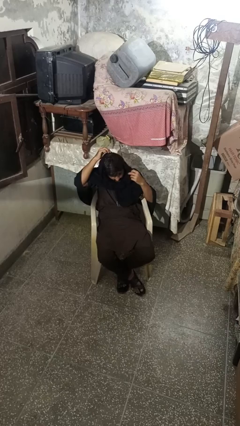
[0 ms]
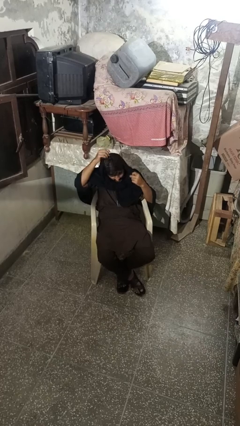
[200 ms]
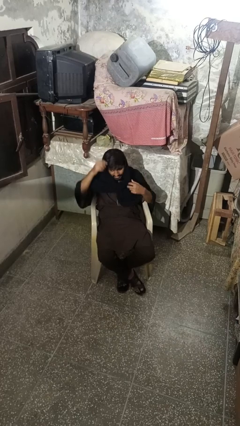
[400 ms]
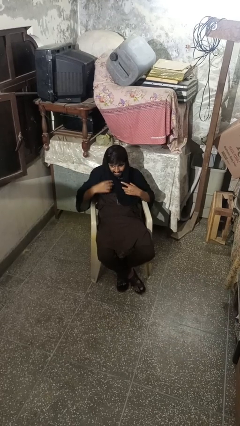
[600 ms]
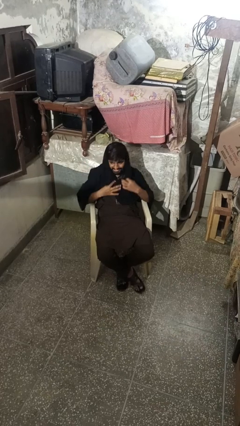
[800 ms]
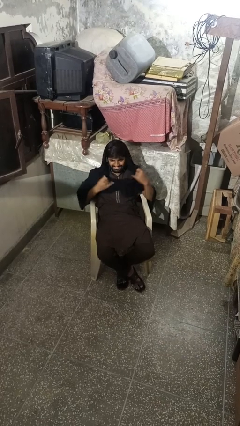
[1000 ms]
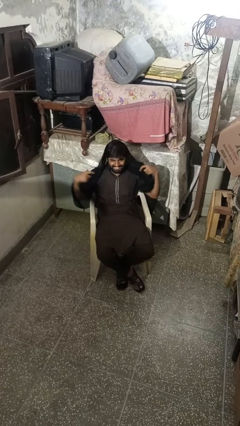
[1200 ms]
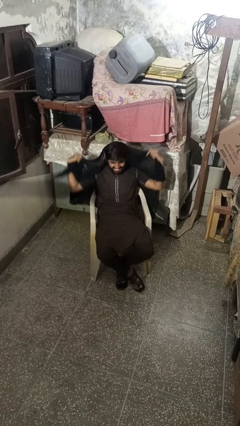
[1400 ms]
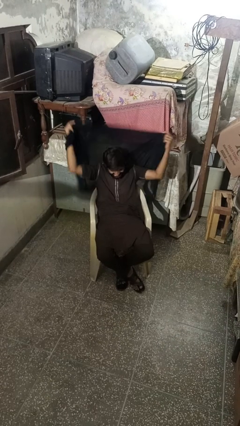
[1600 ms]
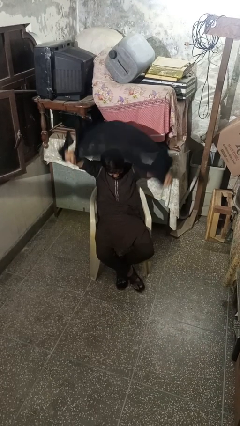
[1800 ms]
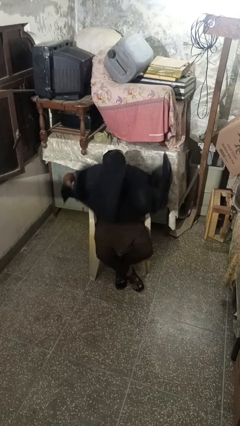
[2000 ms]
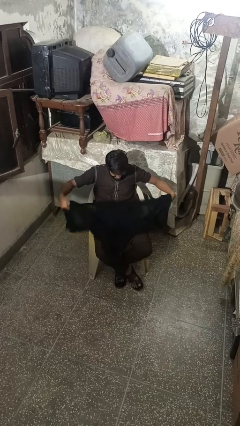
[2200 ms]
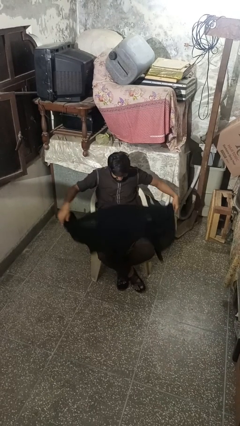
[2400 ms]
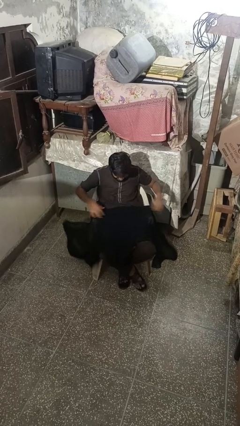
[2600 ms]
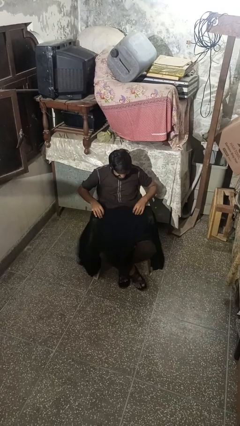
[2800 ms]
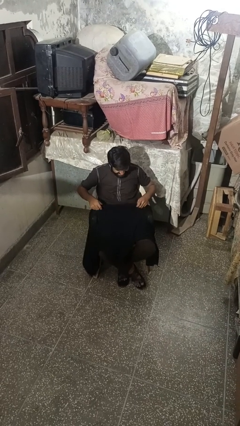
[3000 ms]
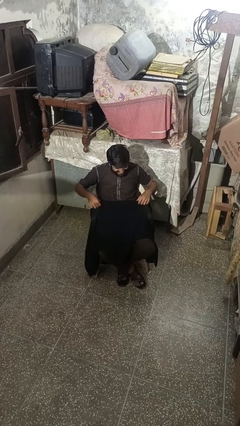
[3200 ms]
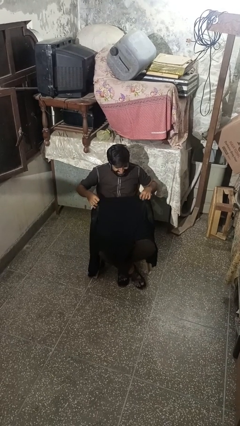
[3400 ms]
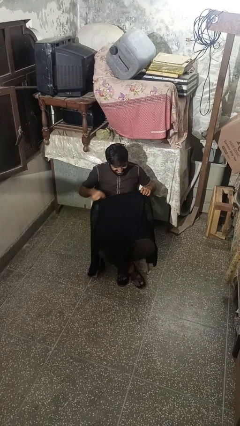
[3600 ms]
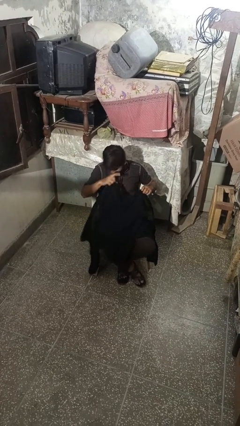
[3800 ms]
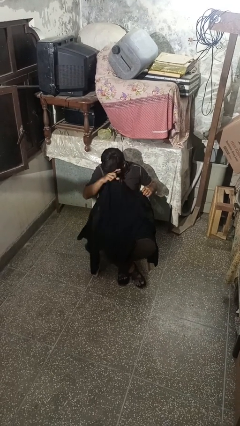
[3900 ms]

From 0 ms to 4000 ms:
person takes off scarf

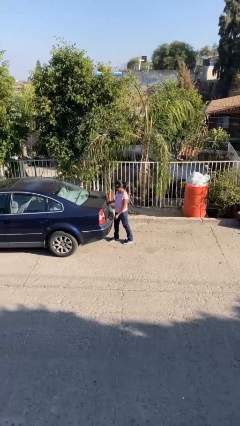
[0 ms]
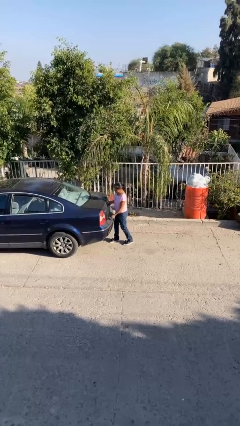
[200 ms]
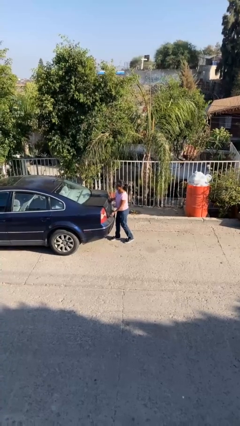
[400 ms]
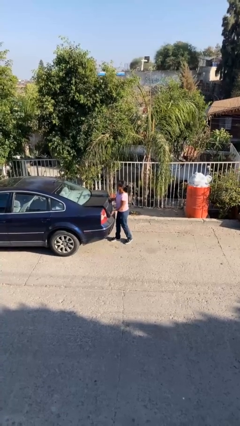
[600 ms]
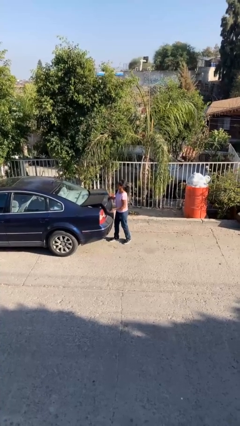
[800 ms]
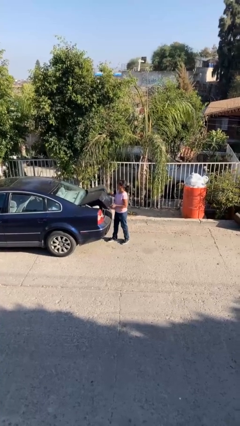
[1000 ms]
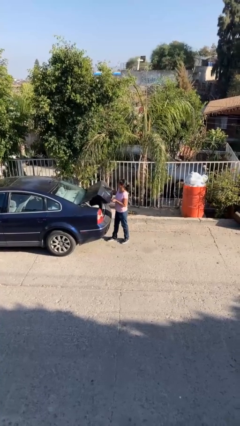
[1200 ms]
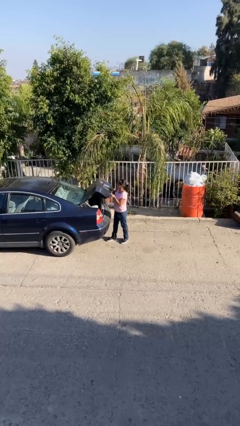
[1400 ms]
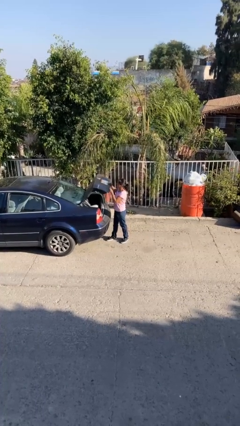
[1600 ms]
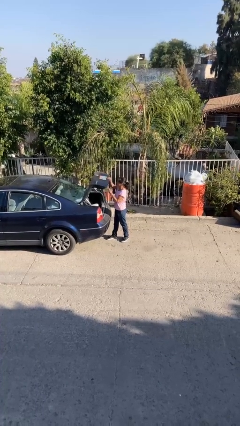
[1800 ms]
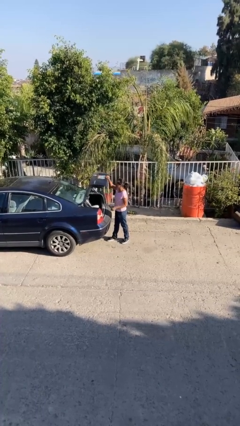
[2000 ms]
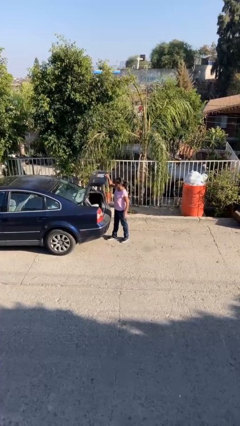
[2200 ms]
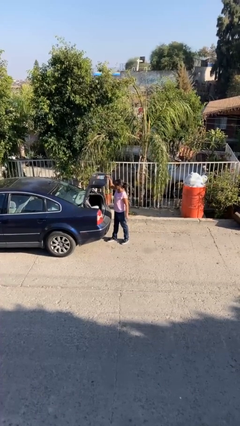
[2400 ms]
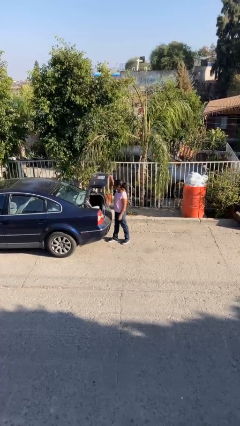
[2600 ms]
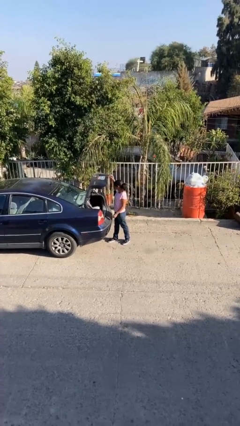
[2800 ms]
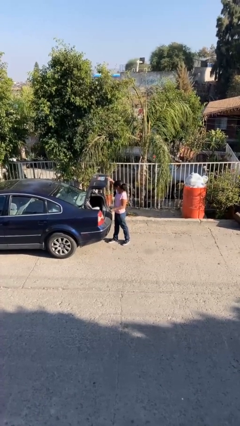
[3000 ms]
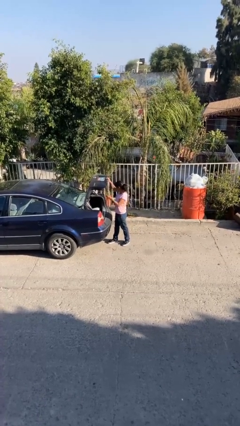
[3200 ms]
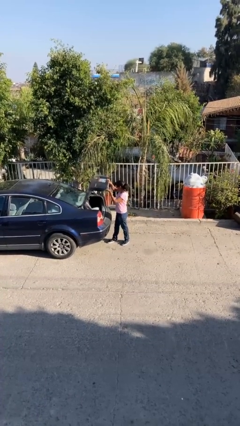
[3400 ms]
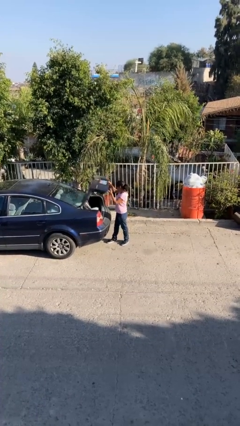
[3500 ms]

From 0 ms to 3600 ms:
person opens car trunk

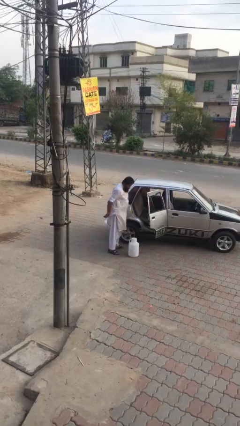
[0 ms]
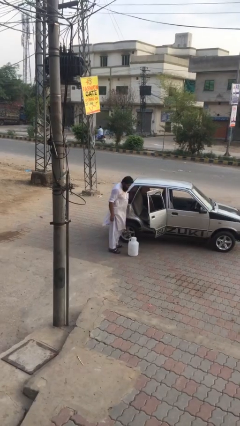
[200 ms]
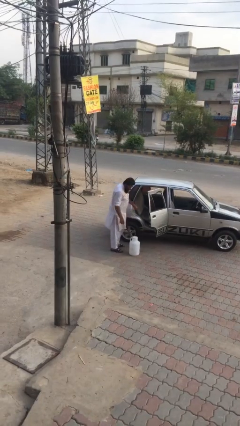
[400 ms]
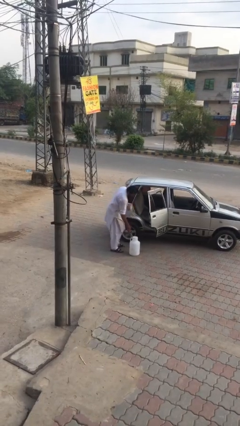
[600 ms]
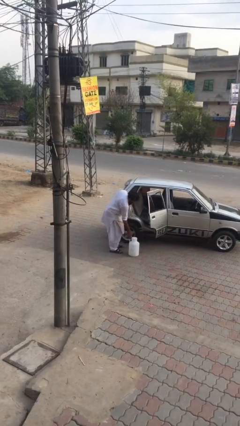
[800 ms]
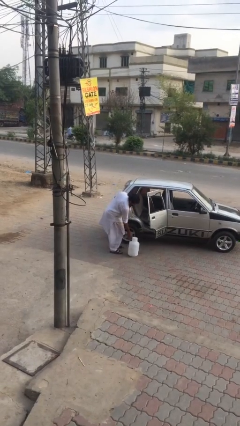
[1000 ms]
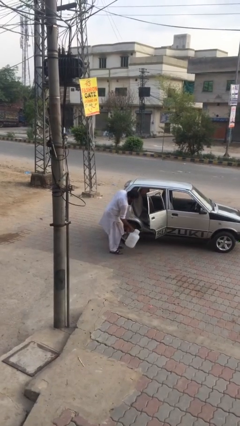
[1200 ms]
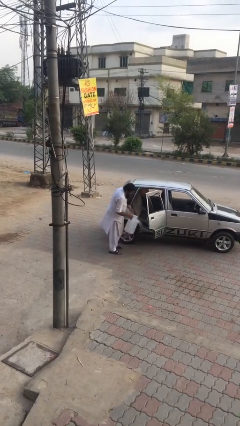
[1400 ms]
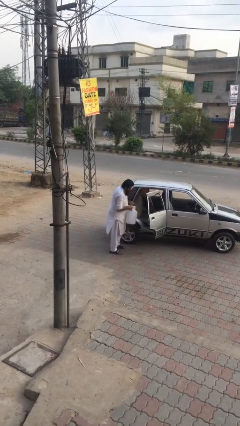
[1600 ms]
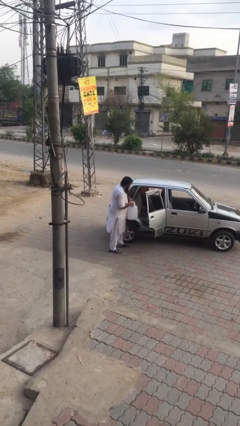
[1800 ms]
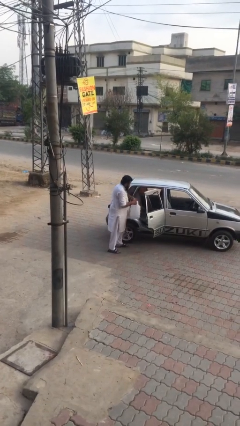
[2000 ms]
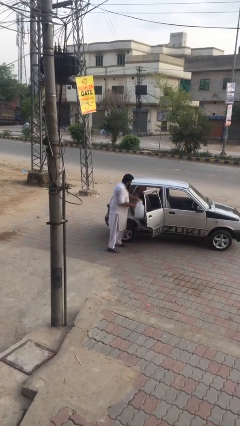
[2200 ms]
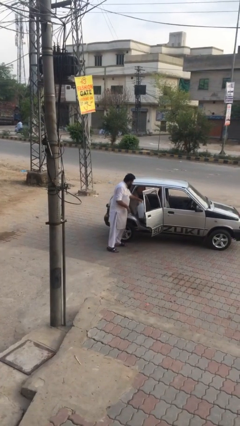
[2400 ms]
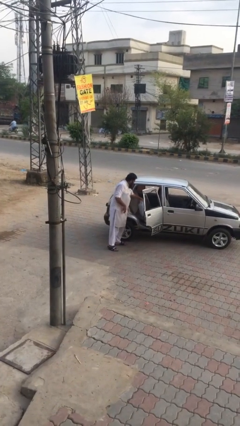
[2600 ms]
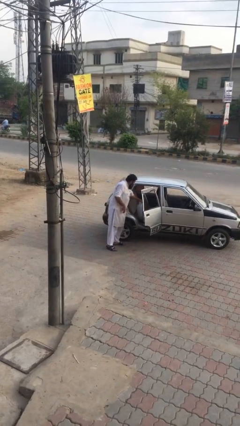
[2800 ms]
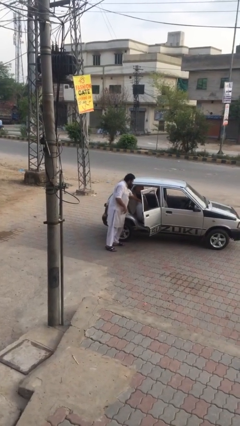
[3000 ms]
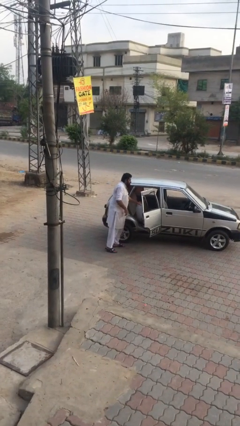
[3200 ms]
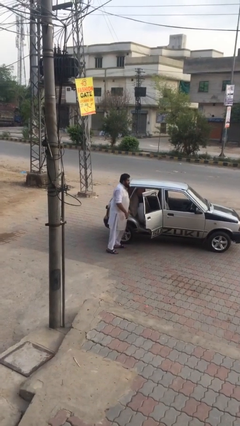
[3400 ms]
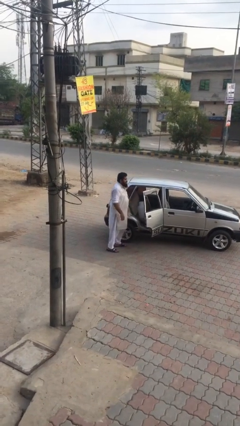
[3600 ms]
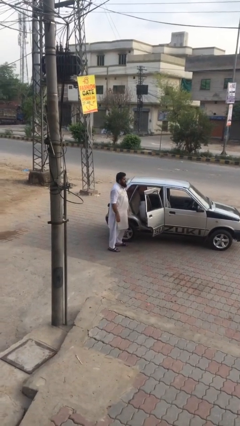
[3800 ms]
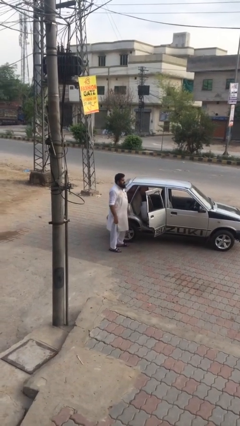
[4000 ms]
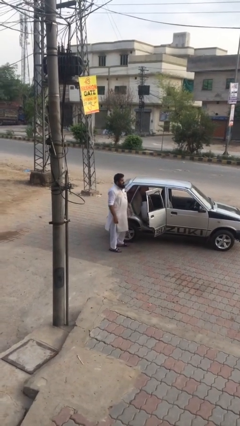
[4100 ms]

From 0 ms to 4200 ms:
person loads car

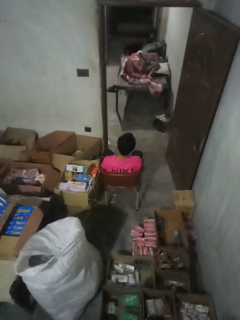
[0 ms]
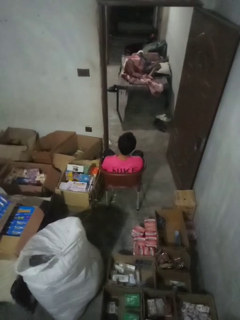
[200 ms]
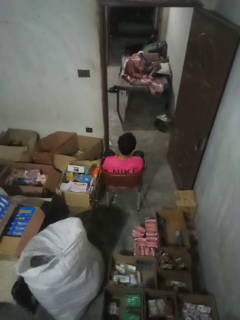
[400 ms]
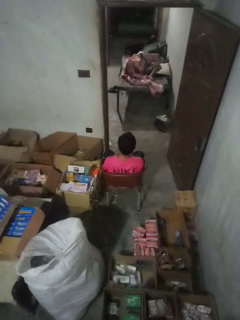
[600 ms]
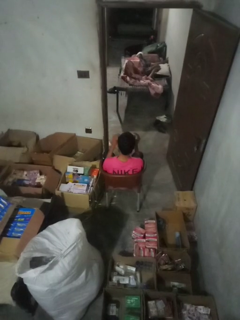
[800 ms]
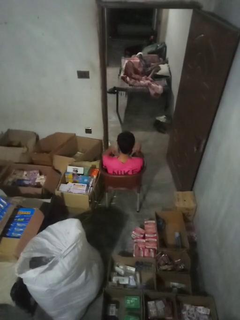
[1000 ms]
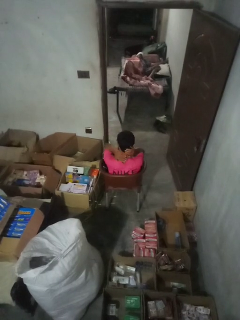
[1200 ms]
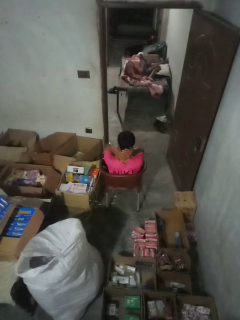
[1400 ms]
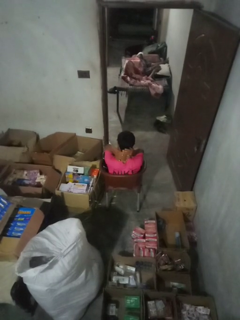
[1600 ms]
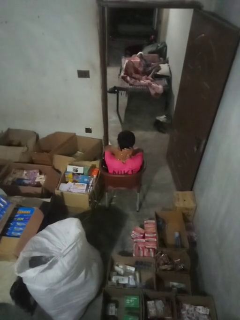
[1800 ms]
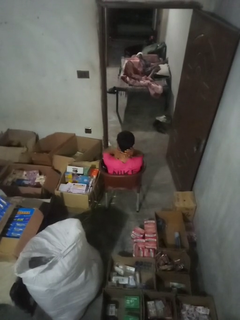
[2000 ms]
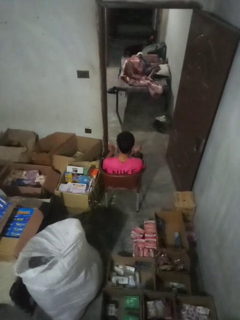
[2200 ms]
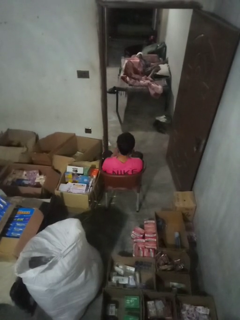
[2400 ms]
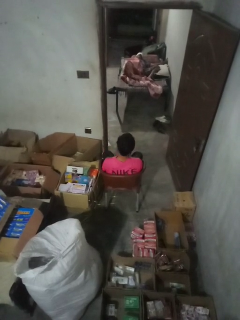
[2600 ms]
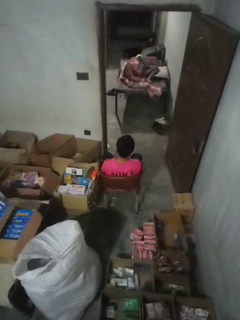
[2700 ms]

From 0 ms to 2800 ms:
person rubs neck

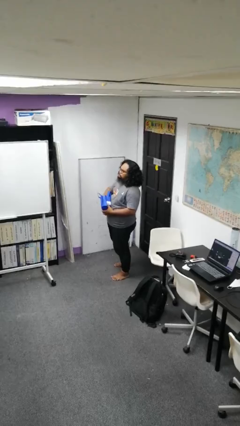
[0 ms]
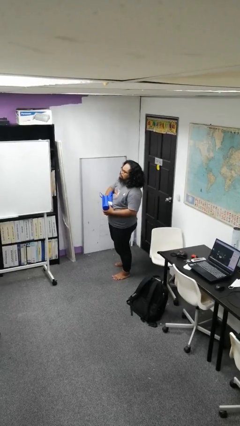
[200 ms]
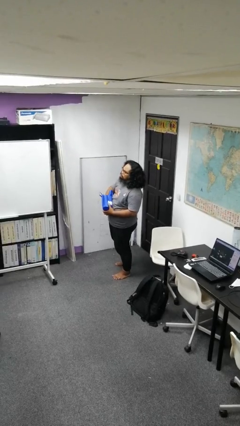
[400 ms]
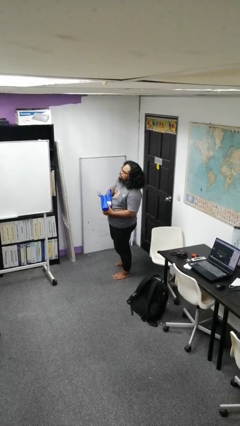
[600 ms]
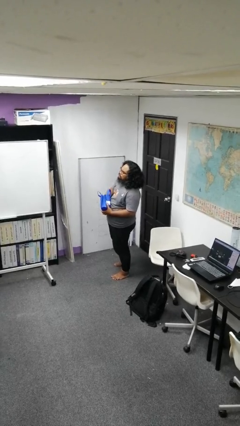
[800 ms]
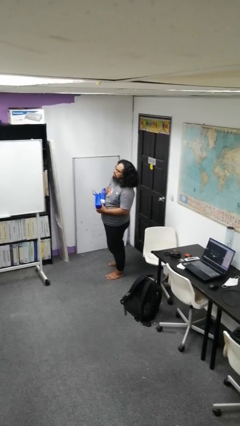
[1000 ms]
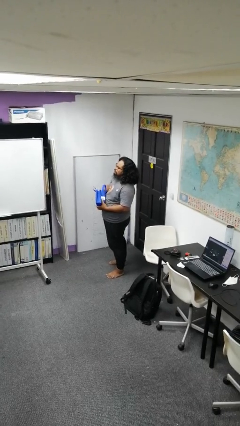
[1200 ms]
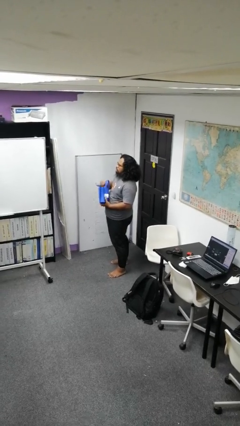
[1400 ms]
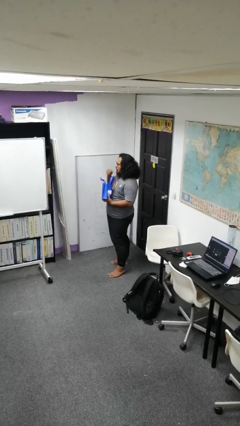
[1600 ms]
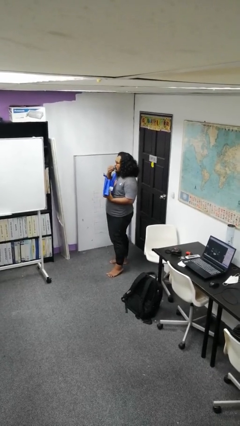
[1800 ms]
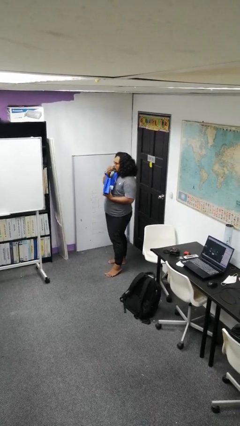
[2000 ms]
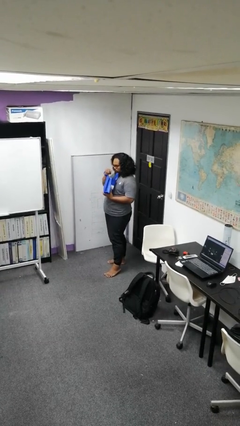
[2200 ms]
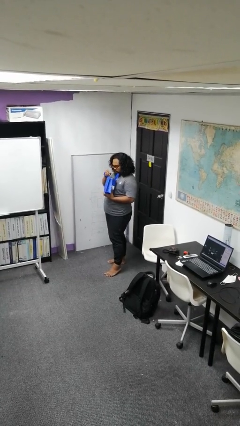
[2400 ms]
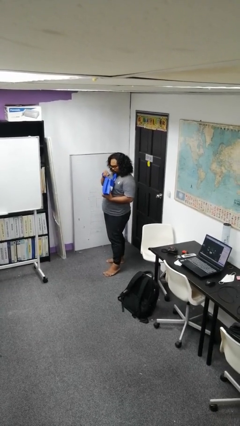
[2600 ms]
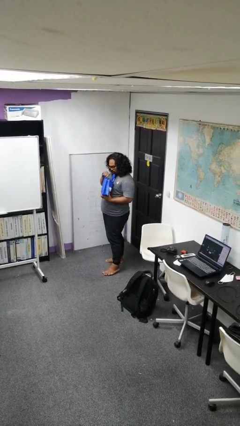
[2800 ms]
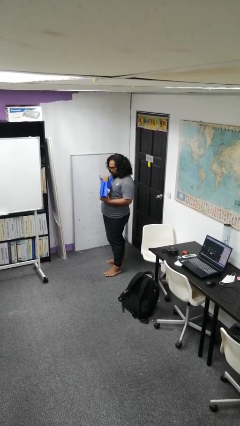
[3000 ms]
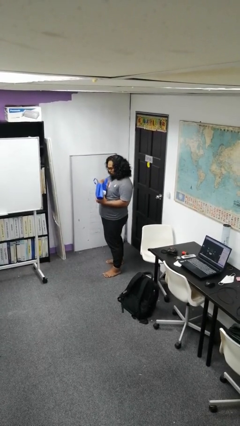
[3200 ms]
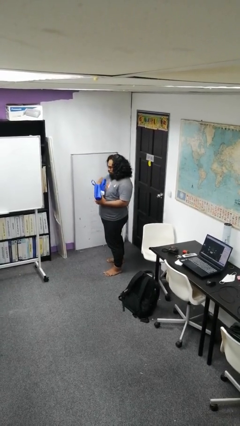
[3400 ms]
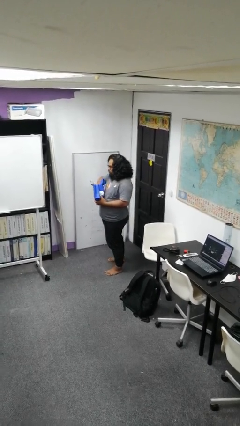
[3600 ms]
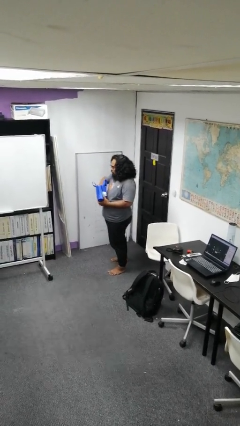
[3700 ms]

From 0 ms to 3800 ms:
person eats snack from bag
